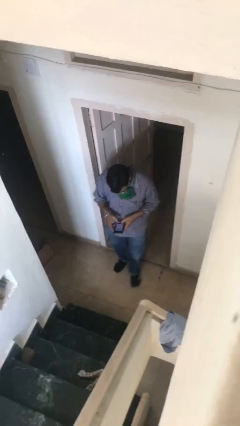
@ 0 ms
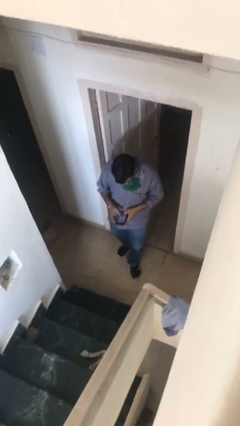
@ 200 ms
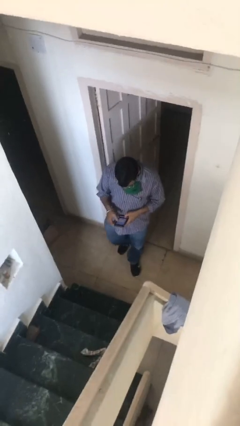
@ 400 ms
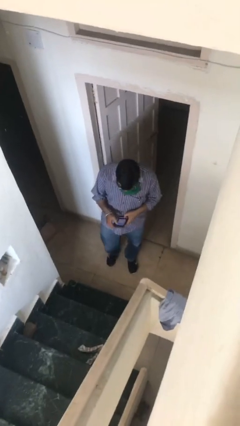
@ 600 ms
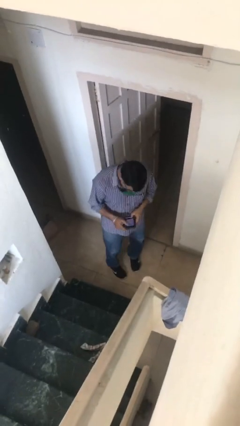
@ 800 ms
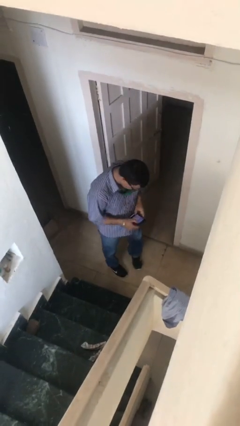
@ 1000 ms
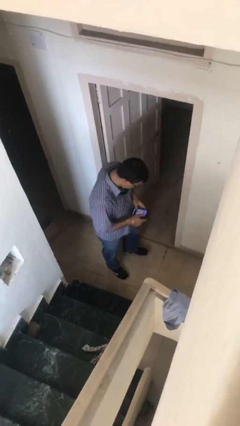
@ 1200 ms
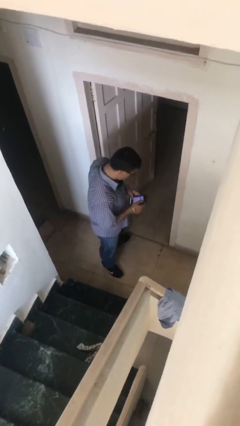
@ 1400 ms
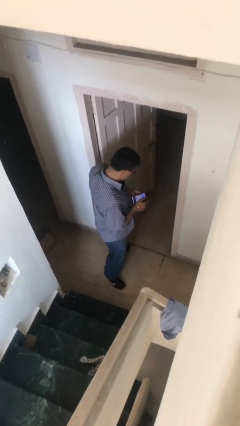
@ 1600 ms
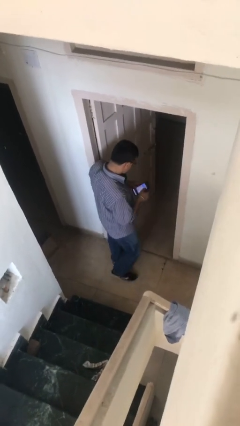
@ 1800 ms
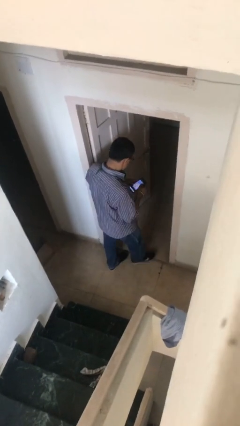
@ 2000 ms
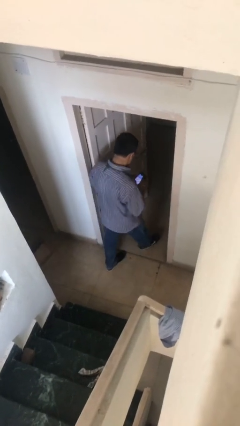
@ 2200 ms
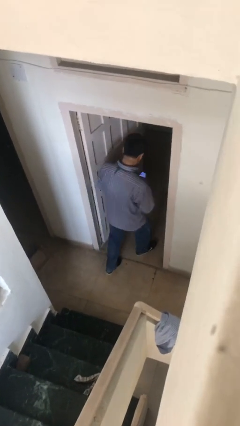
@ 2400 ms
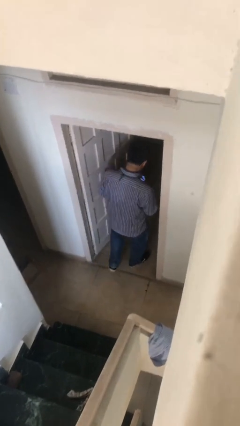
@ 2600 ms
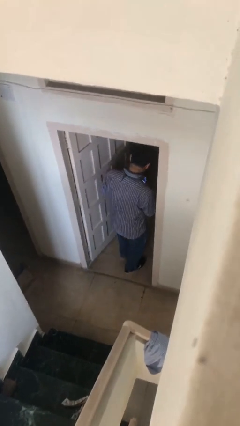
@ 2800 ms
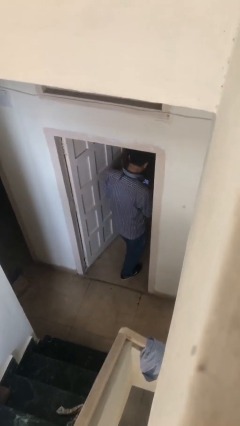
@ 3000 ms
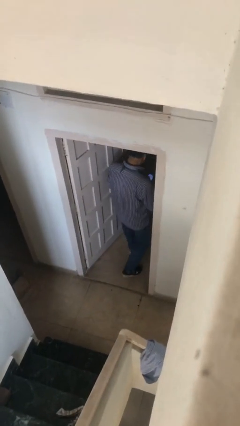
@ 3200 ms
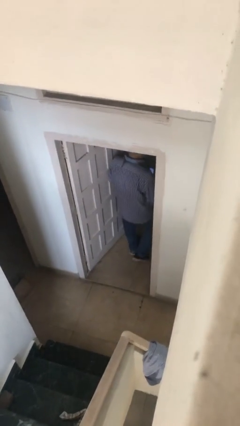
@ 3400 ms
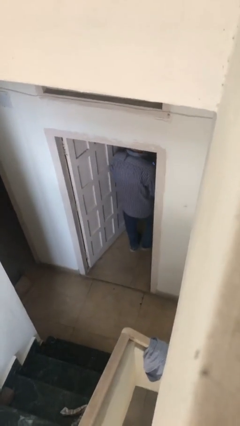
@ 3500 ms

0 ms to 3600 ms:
person exits scene through structure

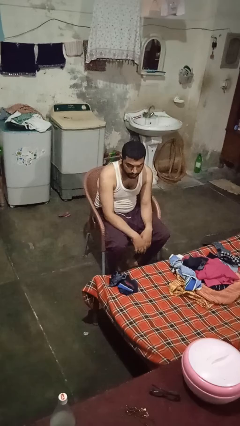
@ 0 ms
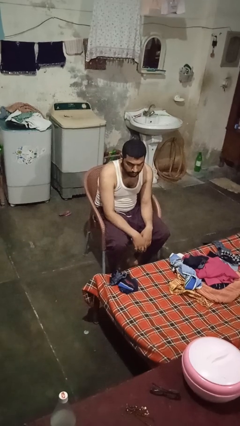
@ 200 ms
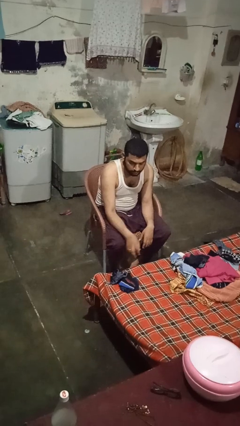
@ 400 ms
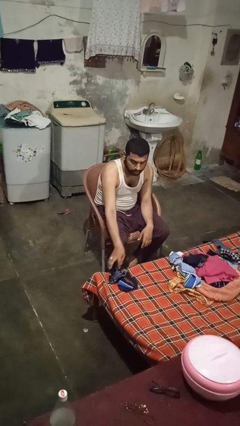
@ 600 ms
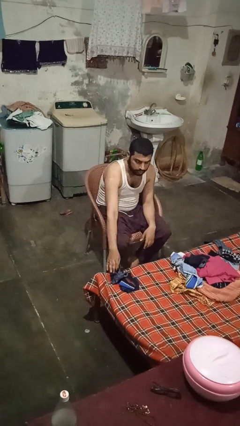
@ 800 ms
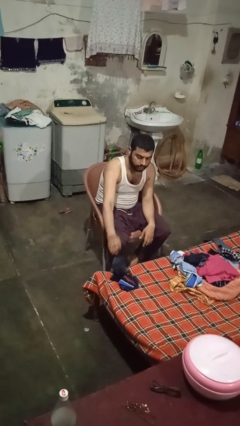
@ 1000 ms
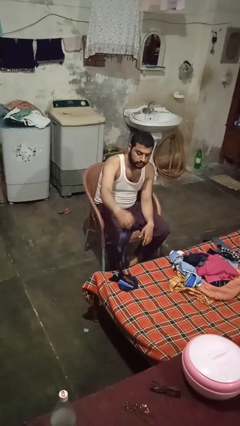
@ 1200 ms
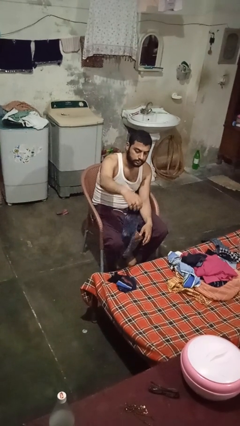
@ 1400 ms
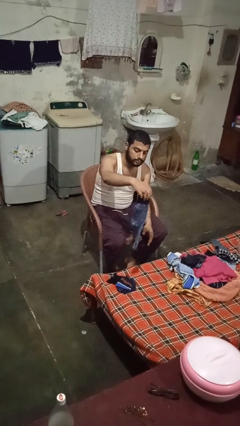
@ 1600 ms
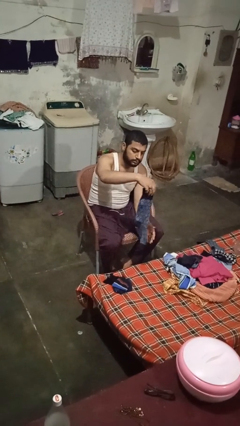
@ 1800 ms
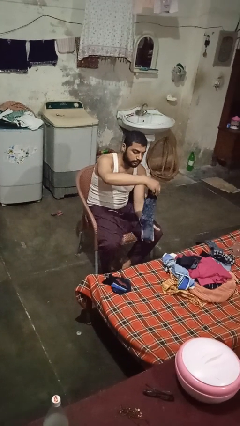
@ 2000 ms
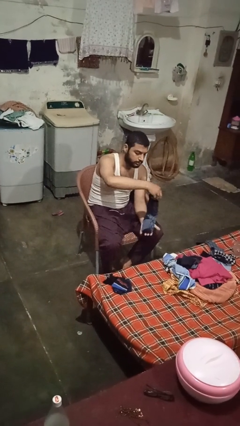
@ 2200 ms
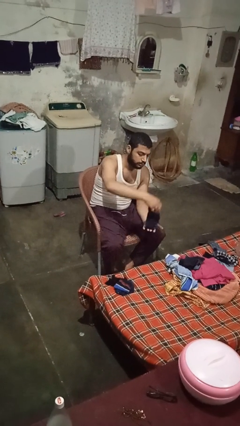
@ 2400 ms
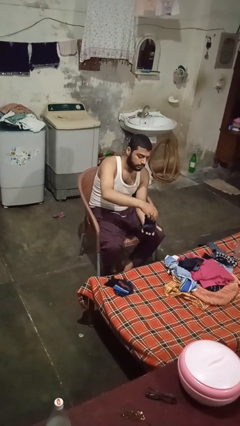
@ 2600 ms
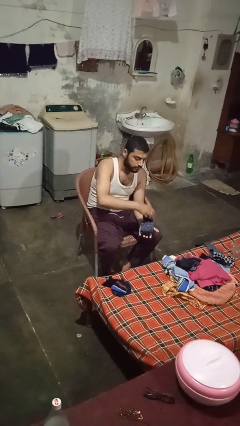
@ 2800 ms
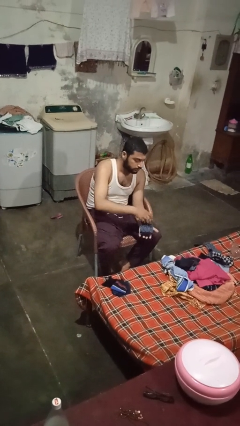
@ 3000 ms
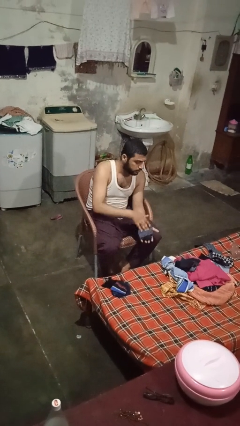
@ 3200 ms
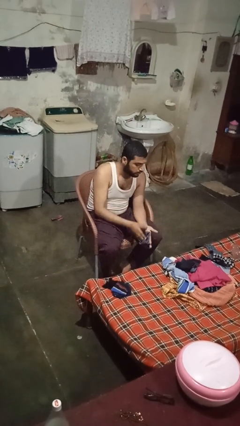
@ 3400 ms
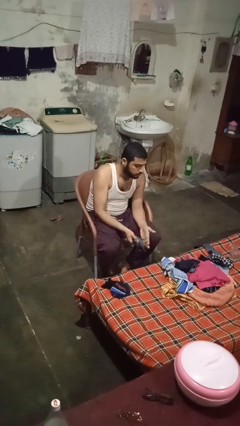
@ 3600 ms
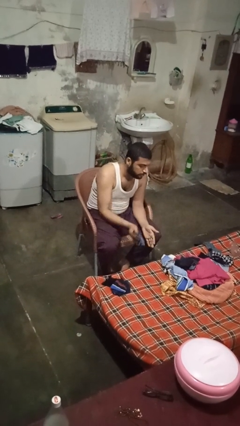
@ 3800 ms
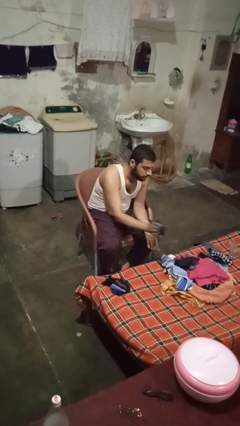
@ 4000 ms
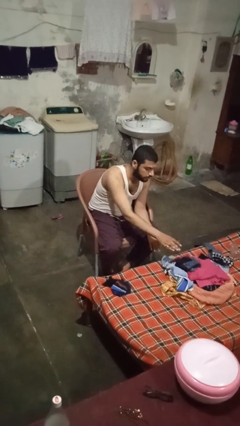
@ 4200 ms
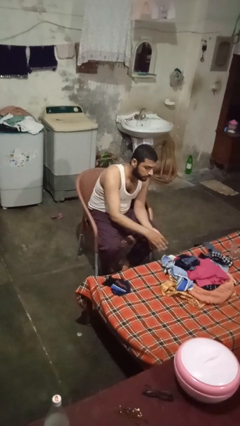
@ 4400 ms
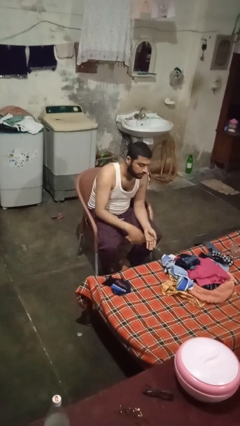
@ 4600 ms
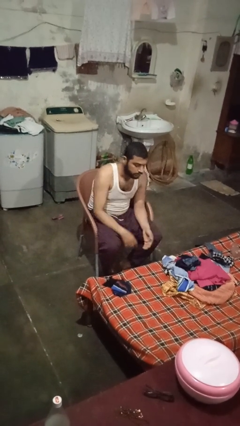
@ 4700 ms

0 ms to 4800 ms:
person folds socks

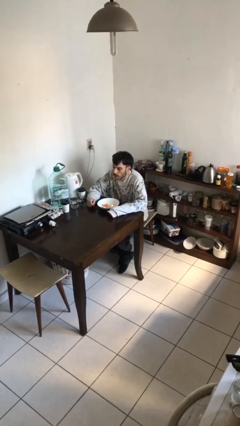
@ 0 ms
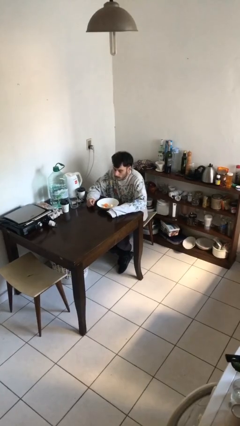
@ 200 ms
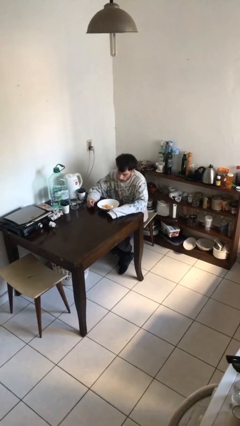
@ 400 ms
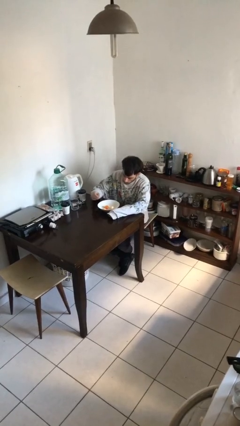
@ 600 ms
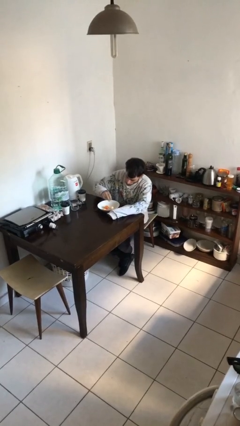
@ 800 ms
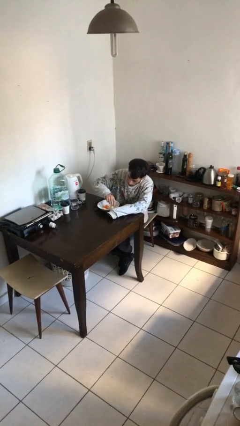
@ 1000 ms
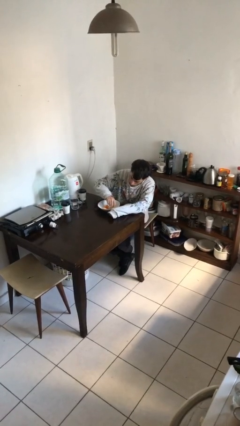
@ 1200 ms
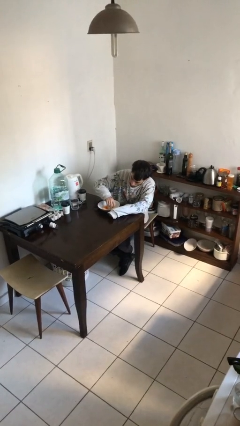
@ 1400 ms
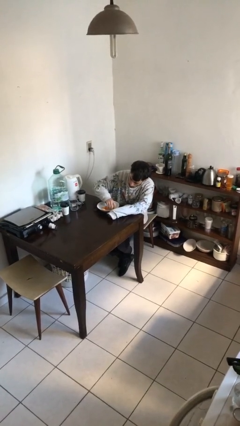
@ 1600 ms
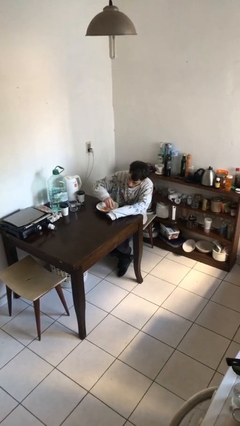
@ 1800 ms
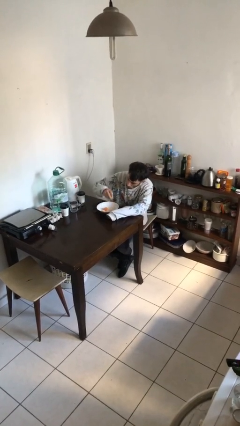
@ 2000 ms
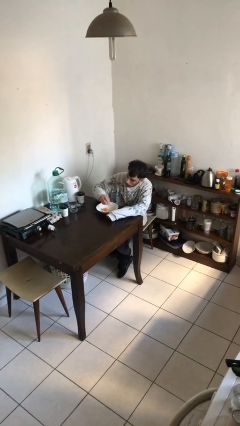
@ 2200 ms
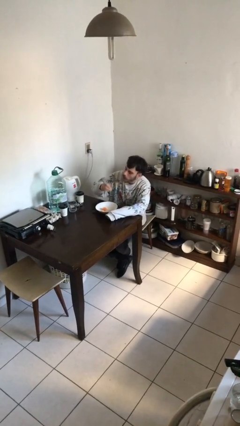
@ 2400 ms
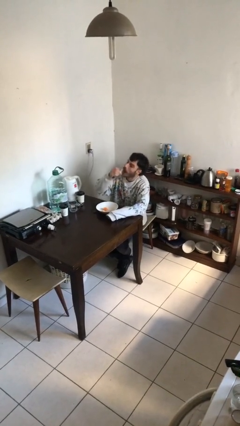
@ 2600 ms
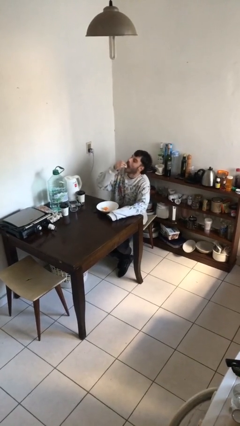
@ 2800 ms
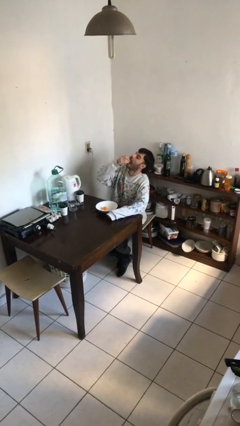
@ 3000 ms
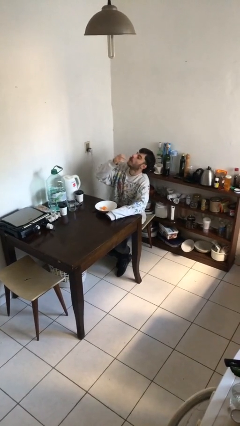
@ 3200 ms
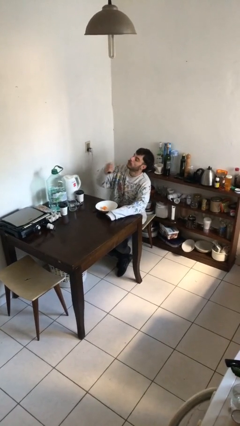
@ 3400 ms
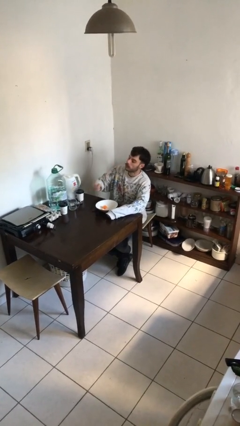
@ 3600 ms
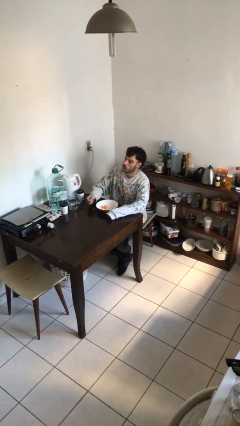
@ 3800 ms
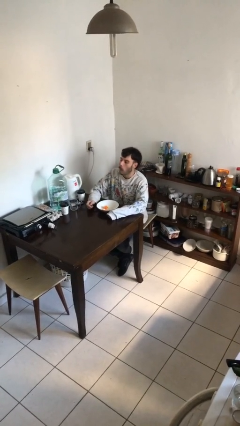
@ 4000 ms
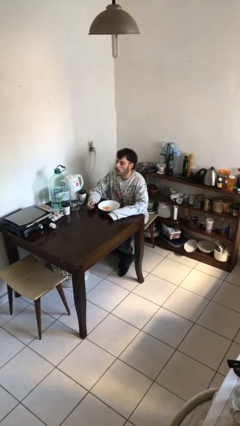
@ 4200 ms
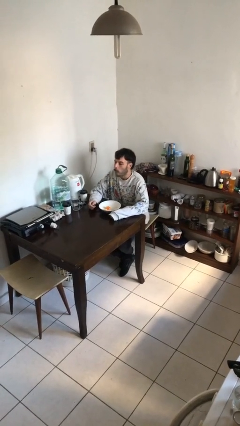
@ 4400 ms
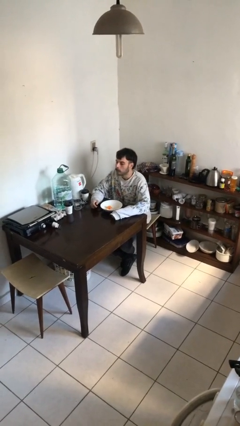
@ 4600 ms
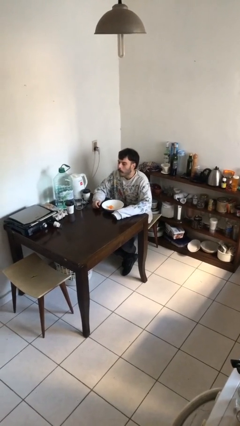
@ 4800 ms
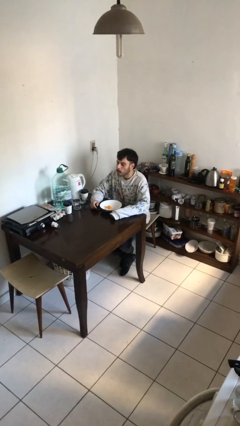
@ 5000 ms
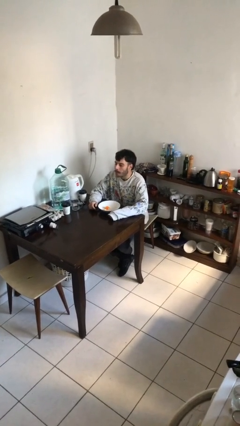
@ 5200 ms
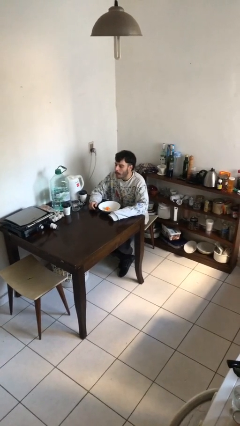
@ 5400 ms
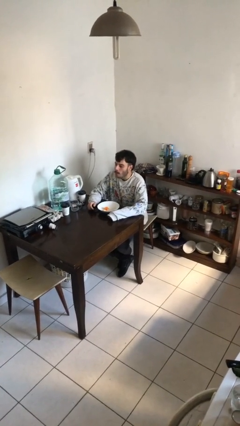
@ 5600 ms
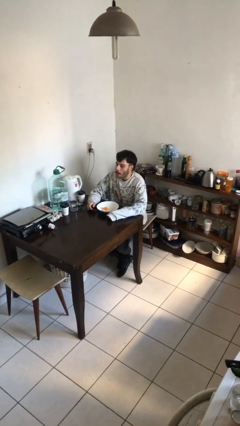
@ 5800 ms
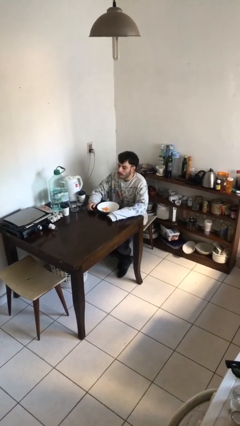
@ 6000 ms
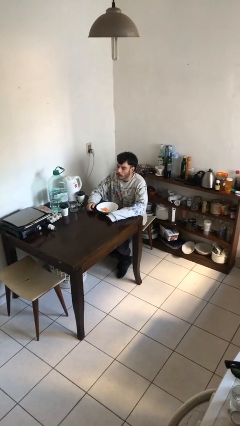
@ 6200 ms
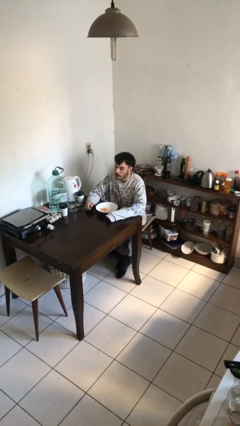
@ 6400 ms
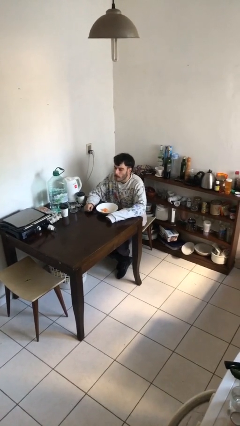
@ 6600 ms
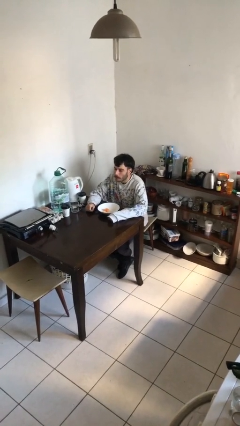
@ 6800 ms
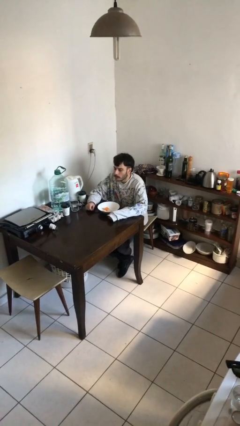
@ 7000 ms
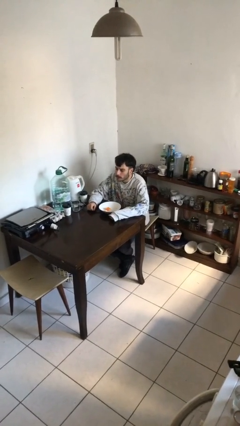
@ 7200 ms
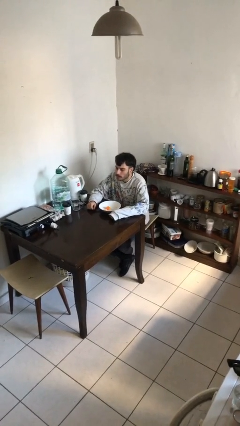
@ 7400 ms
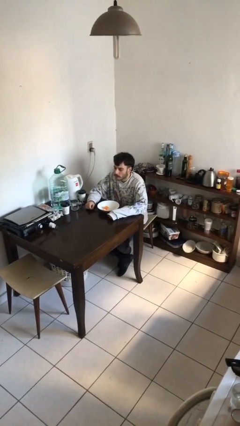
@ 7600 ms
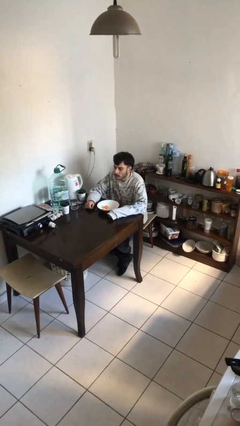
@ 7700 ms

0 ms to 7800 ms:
person eats with hands

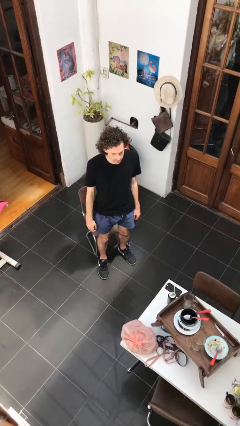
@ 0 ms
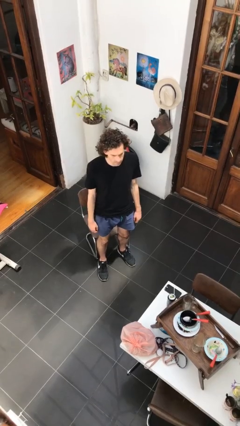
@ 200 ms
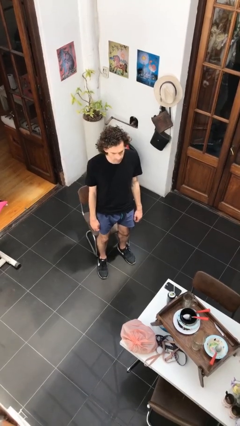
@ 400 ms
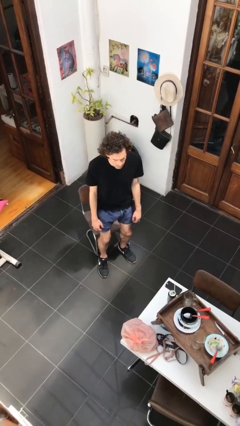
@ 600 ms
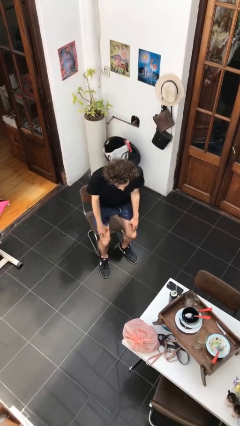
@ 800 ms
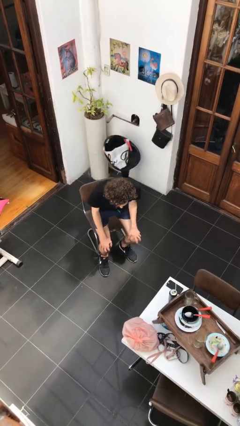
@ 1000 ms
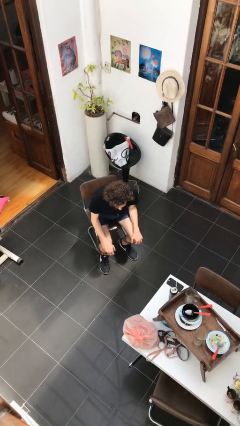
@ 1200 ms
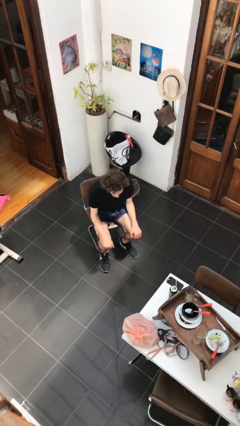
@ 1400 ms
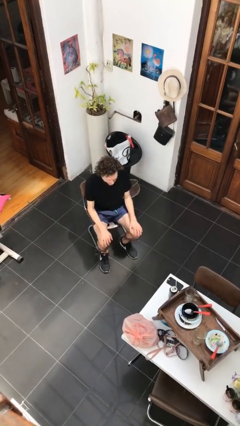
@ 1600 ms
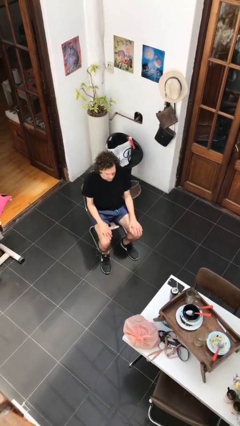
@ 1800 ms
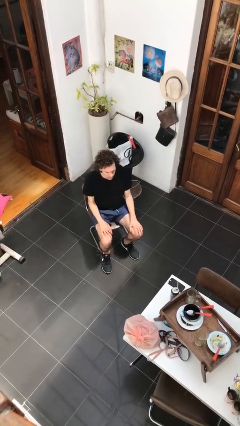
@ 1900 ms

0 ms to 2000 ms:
person sits down
